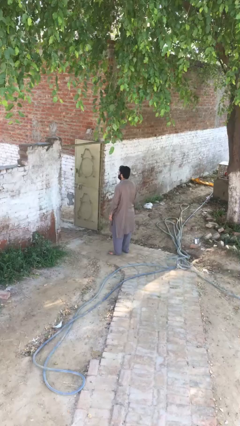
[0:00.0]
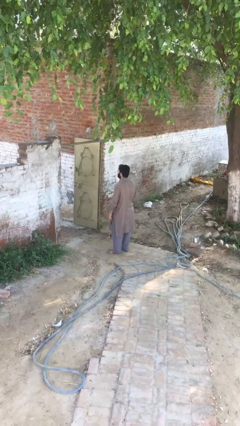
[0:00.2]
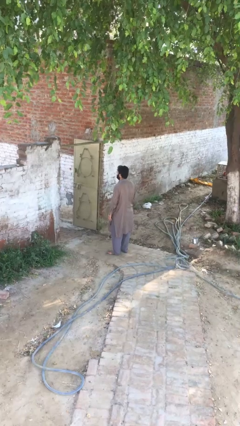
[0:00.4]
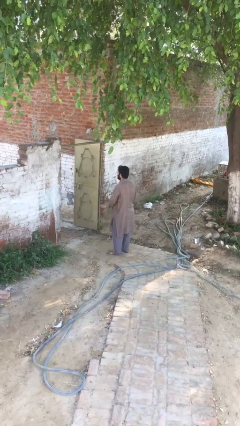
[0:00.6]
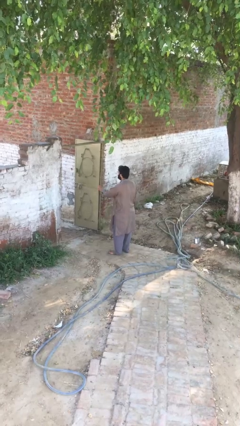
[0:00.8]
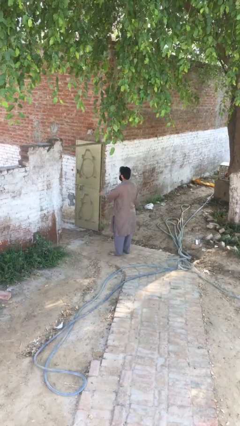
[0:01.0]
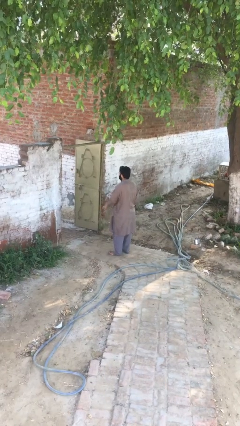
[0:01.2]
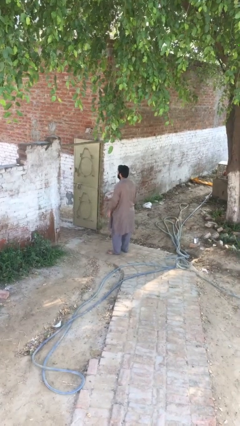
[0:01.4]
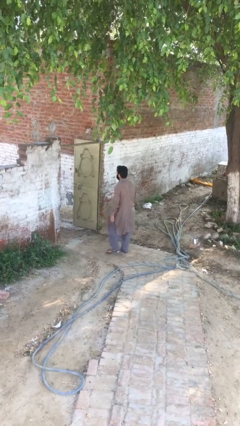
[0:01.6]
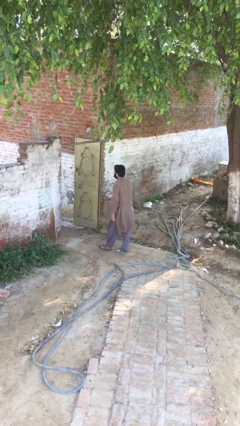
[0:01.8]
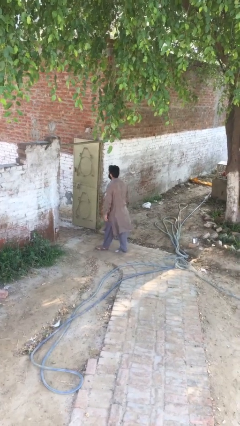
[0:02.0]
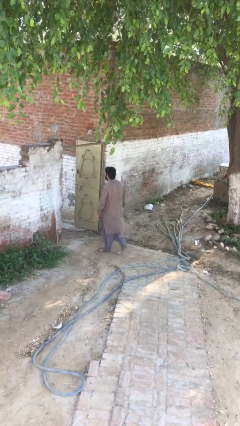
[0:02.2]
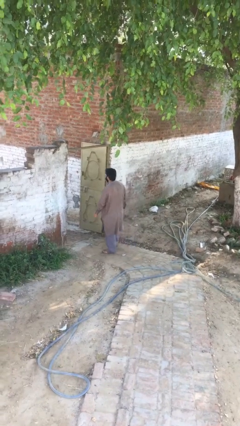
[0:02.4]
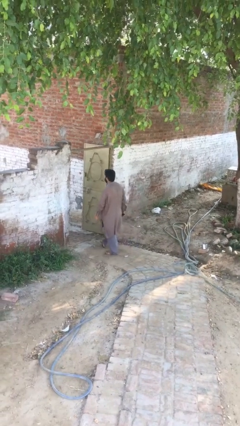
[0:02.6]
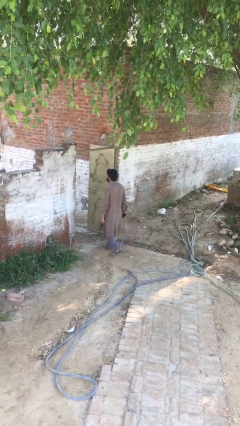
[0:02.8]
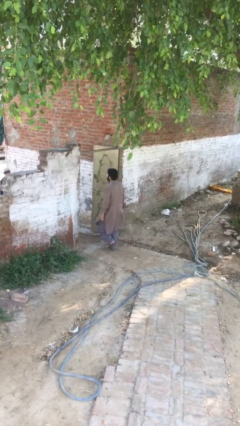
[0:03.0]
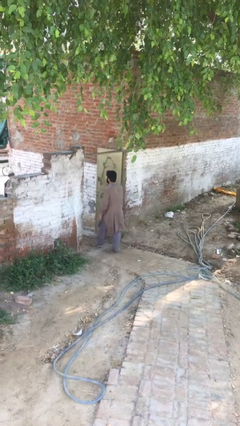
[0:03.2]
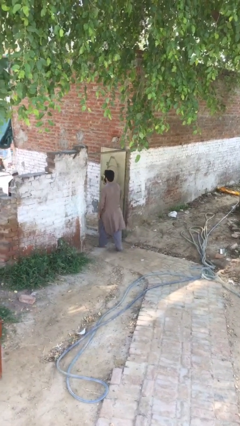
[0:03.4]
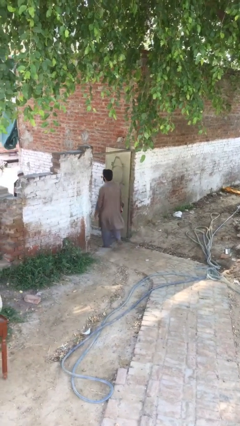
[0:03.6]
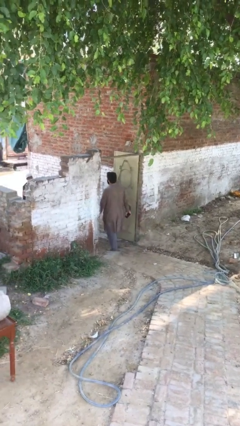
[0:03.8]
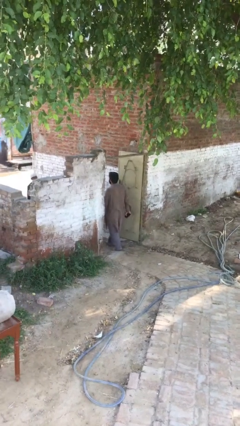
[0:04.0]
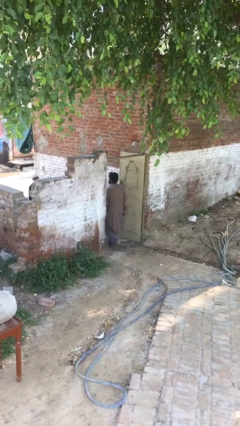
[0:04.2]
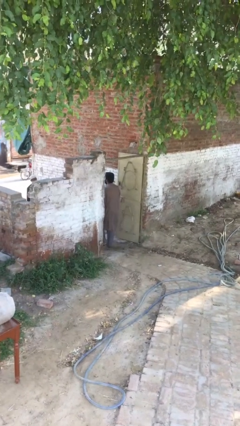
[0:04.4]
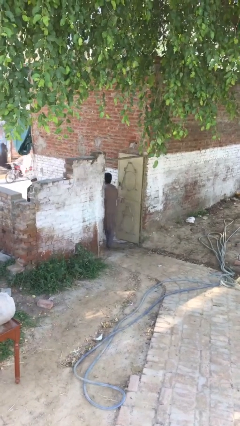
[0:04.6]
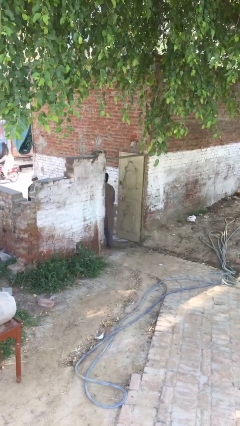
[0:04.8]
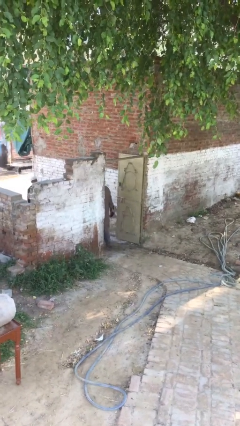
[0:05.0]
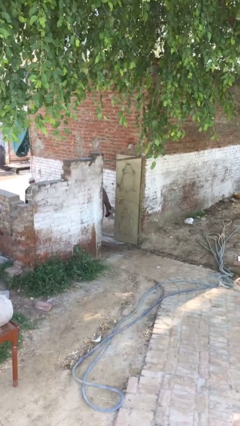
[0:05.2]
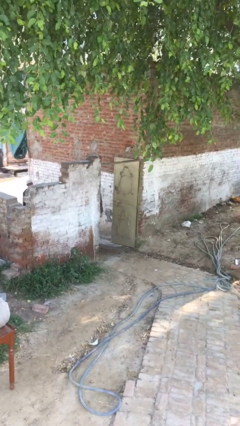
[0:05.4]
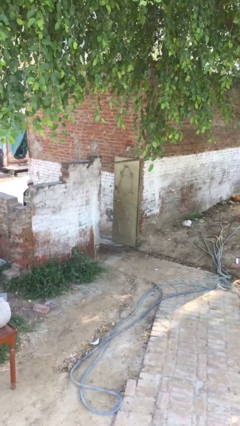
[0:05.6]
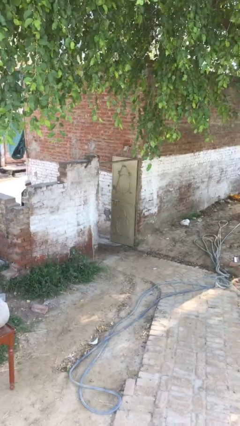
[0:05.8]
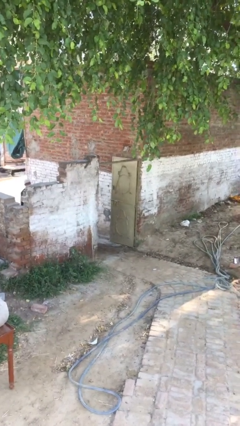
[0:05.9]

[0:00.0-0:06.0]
person exits scene through structure

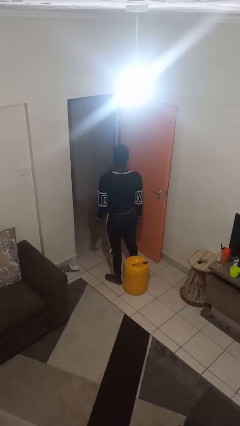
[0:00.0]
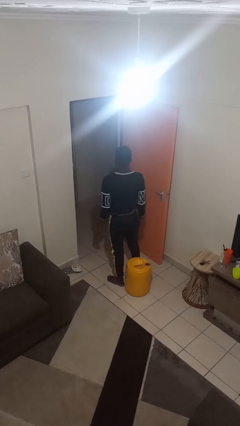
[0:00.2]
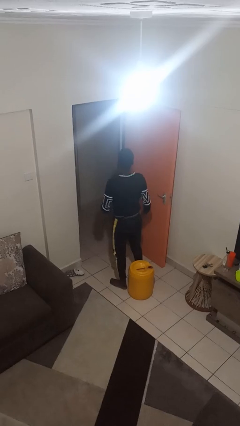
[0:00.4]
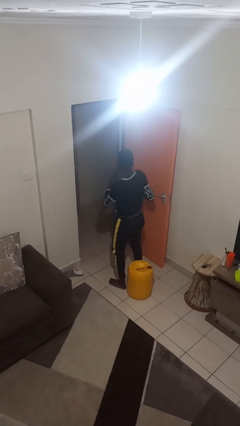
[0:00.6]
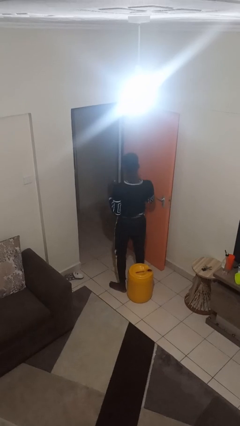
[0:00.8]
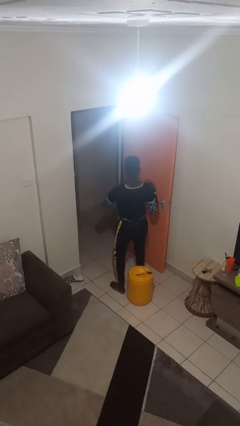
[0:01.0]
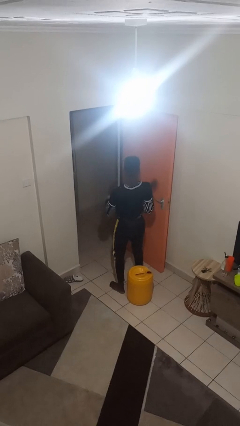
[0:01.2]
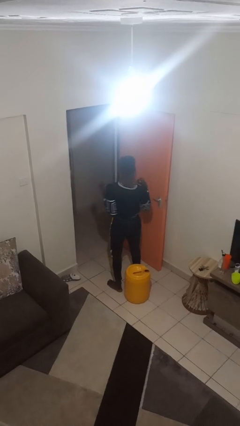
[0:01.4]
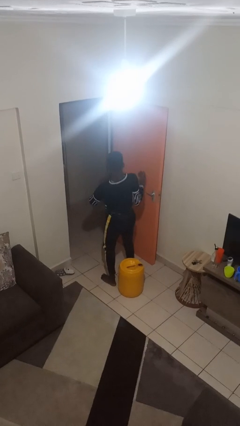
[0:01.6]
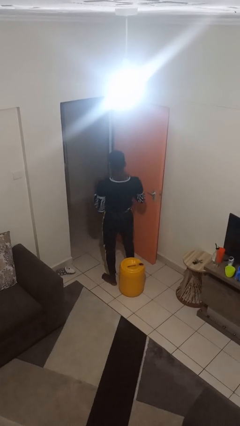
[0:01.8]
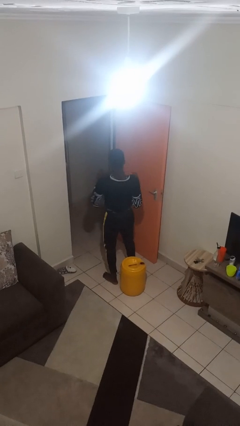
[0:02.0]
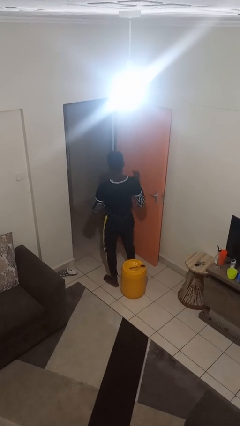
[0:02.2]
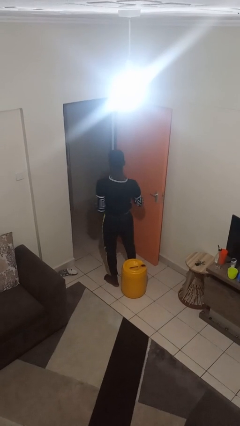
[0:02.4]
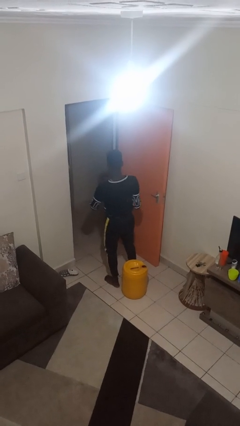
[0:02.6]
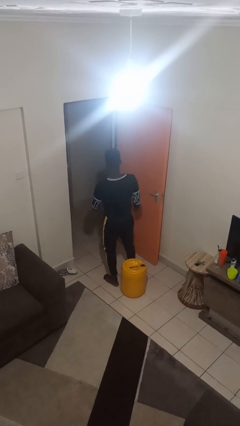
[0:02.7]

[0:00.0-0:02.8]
person drums on chest

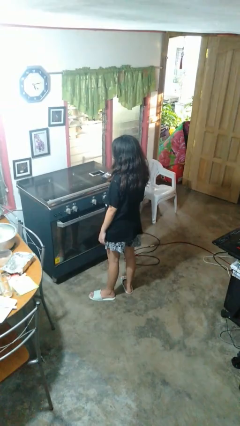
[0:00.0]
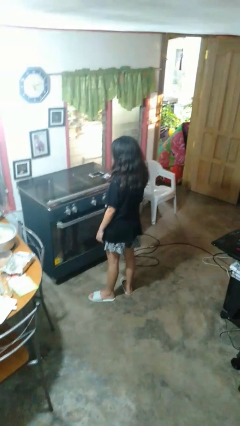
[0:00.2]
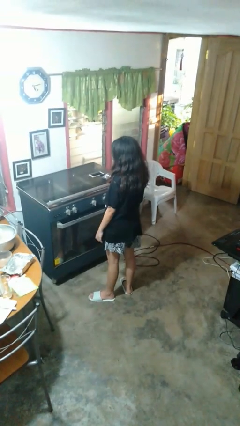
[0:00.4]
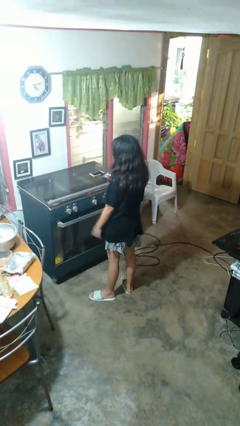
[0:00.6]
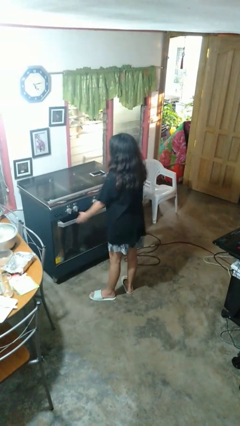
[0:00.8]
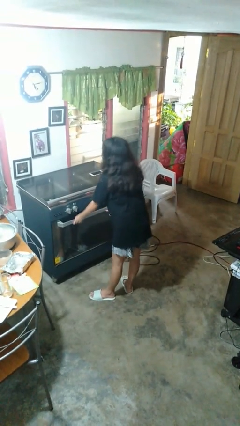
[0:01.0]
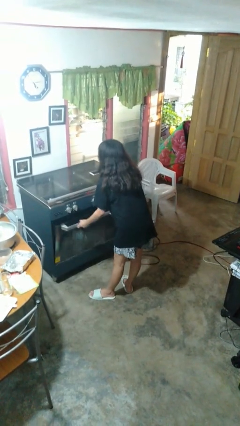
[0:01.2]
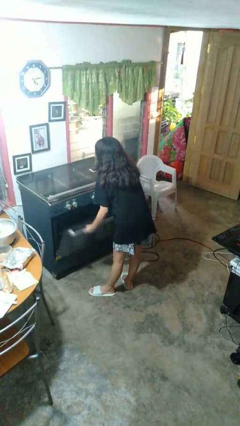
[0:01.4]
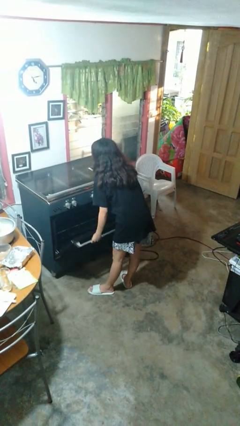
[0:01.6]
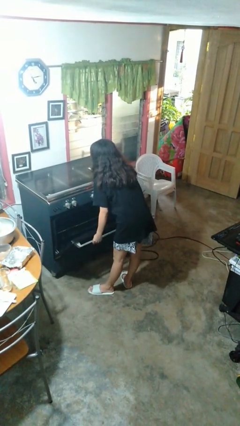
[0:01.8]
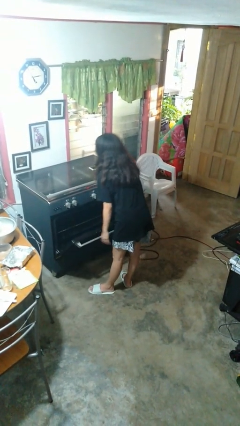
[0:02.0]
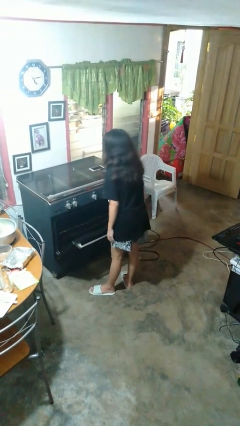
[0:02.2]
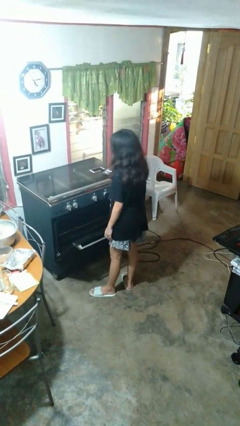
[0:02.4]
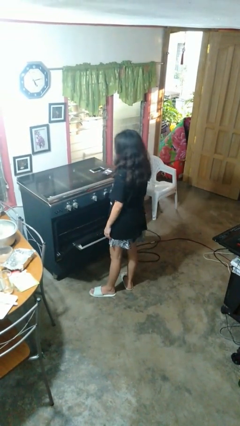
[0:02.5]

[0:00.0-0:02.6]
person opens oven door

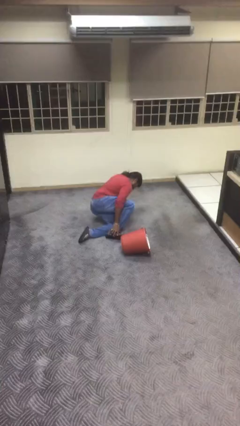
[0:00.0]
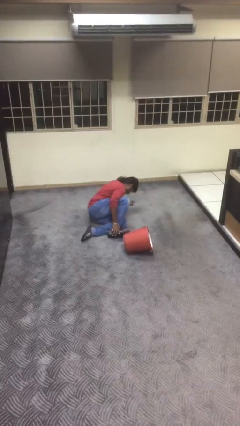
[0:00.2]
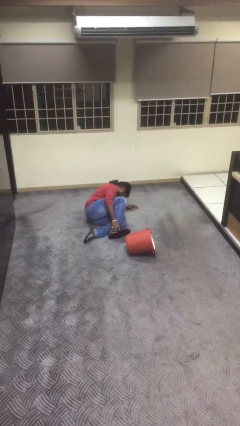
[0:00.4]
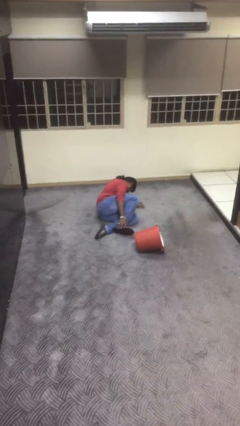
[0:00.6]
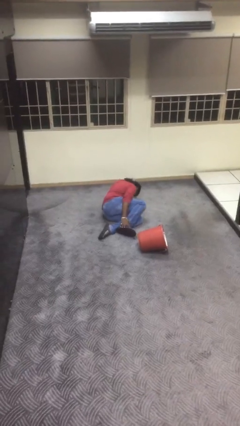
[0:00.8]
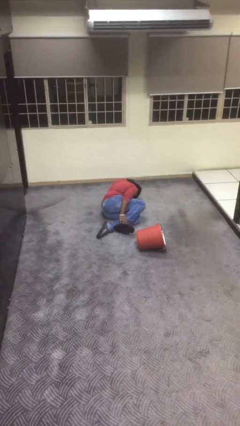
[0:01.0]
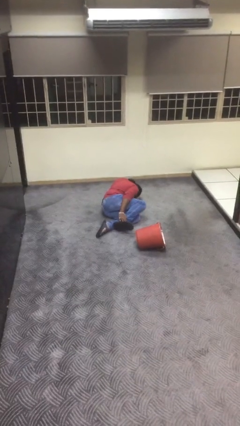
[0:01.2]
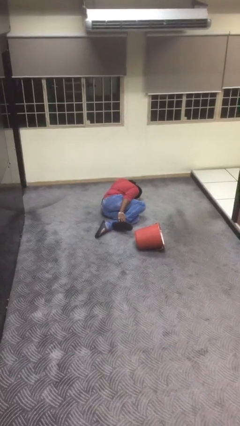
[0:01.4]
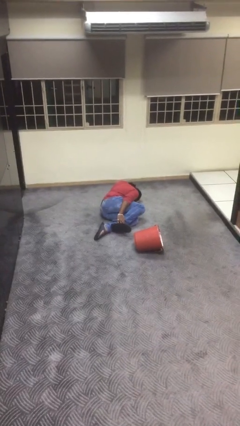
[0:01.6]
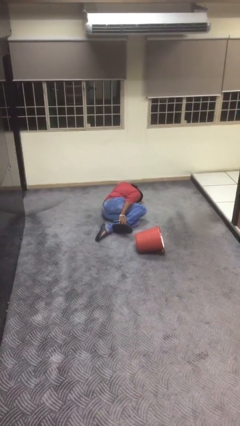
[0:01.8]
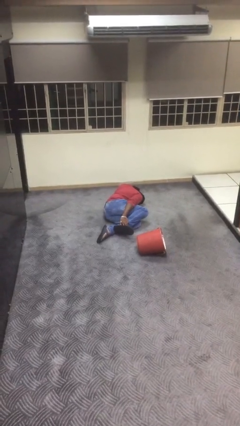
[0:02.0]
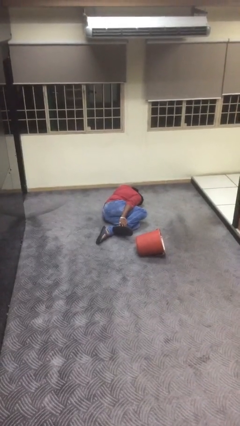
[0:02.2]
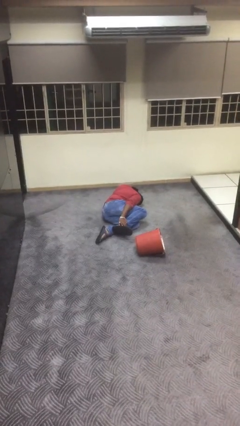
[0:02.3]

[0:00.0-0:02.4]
person lies down on floor

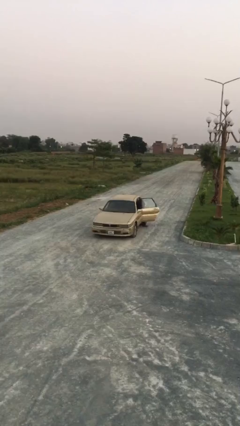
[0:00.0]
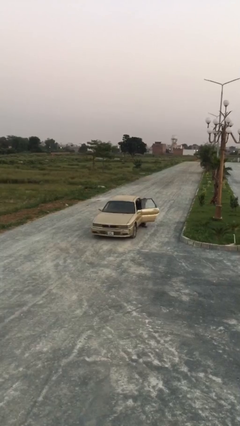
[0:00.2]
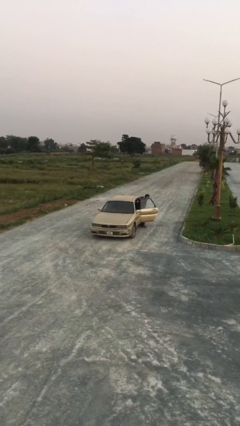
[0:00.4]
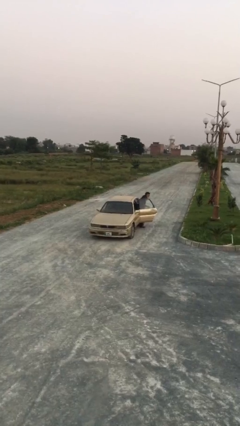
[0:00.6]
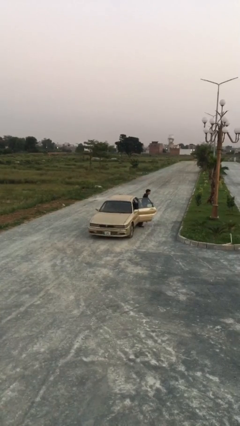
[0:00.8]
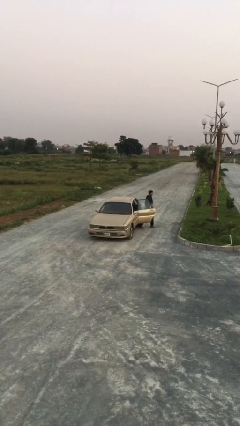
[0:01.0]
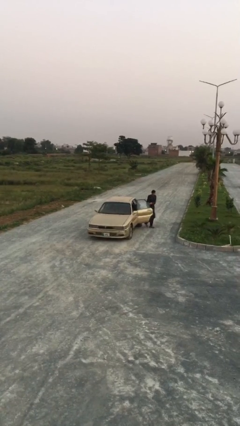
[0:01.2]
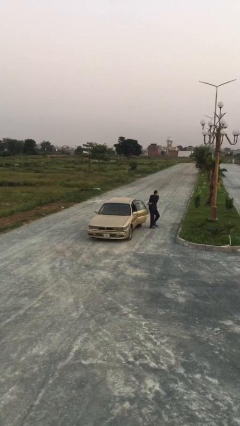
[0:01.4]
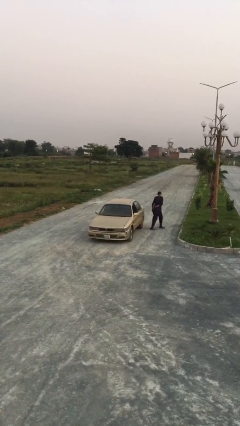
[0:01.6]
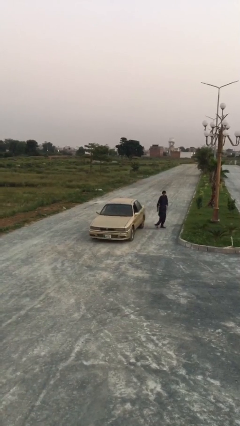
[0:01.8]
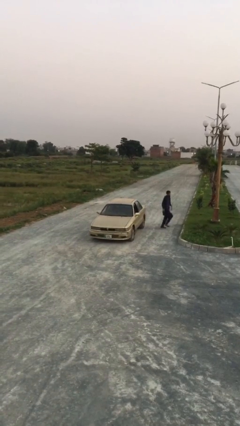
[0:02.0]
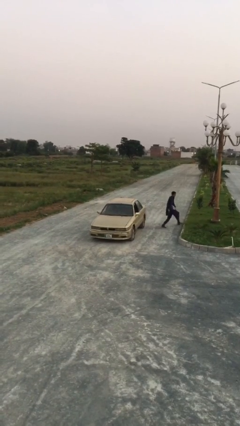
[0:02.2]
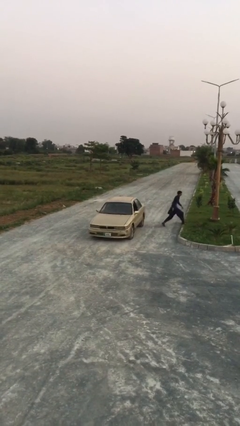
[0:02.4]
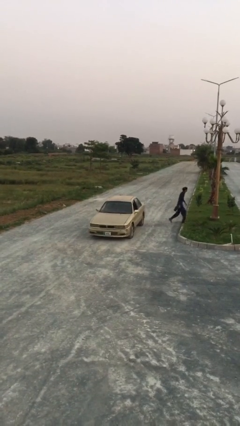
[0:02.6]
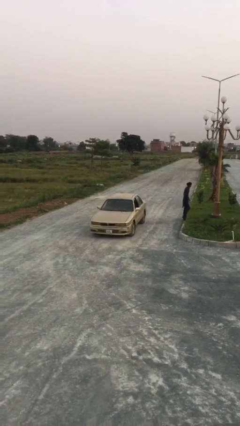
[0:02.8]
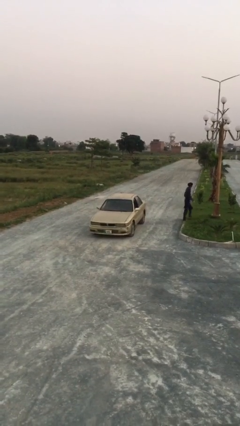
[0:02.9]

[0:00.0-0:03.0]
car drops off person

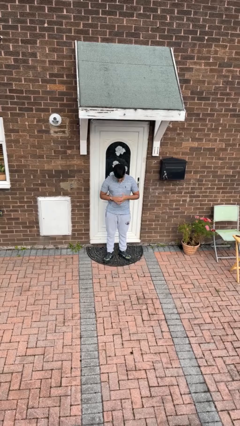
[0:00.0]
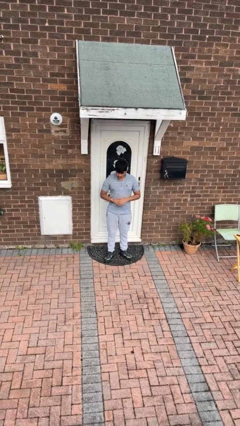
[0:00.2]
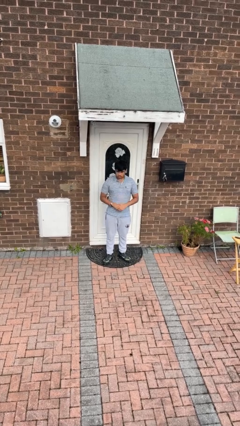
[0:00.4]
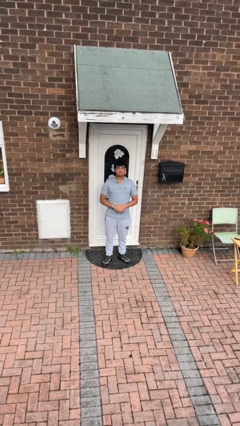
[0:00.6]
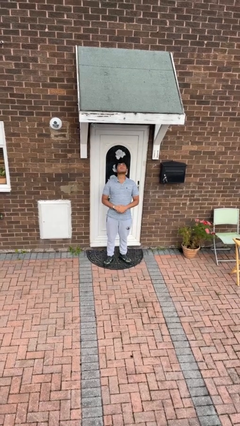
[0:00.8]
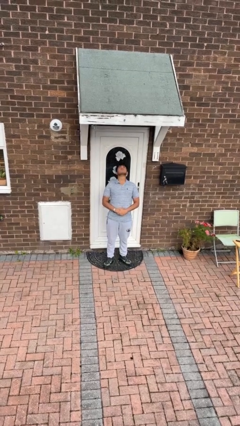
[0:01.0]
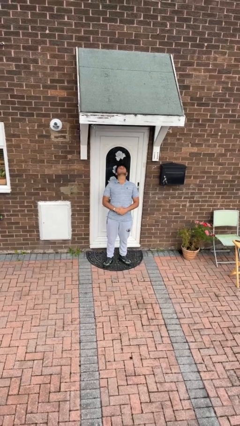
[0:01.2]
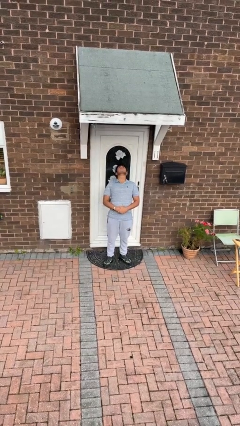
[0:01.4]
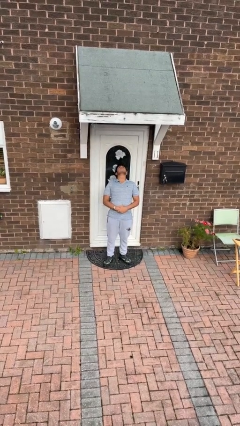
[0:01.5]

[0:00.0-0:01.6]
person stretches back
